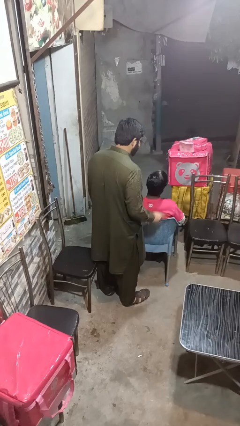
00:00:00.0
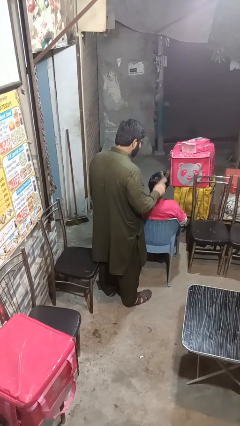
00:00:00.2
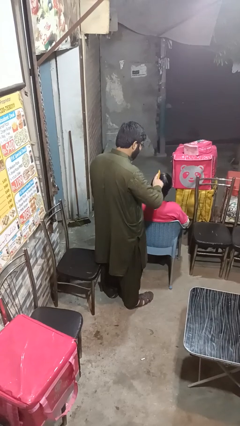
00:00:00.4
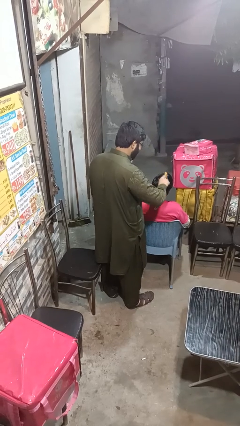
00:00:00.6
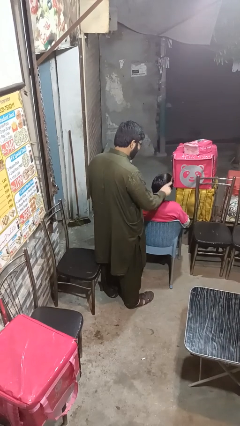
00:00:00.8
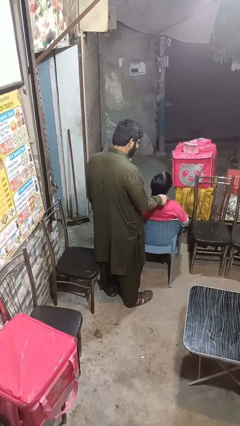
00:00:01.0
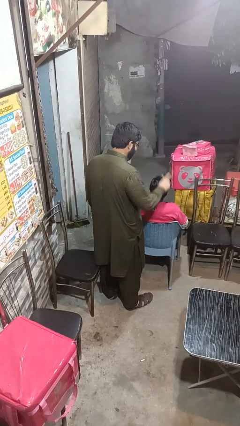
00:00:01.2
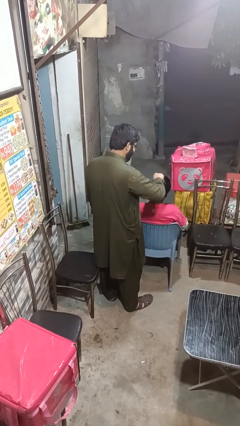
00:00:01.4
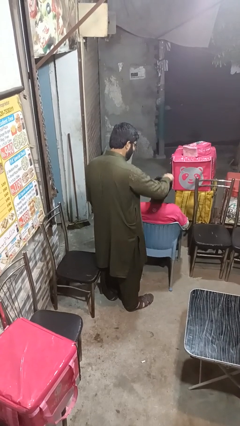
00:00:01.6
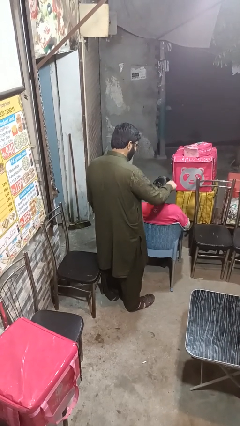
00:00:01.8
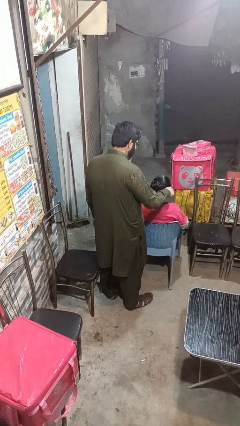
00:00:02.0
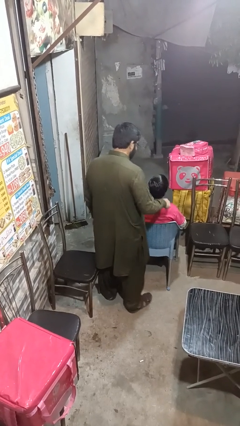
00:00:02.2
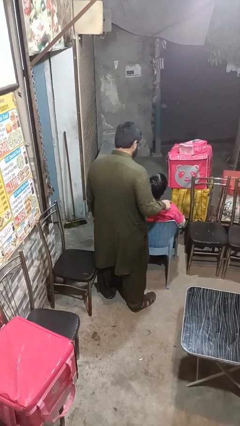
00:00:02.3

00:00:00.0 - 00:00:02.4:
person brushes hair of person

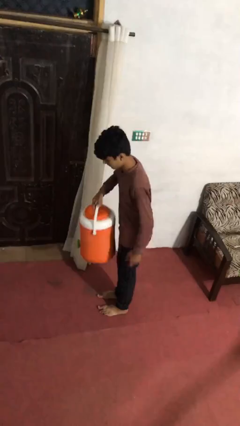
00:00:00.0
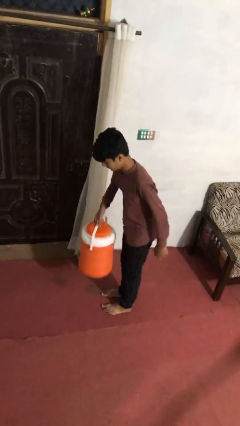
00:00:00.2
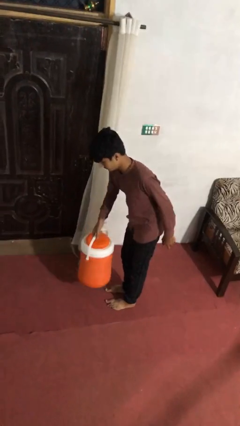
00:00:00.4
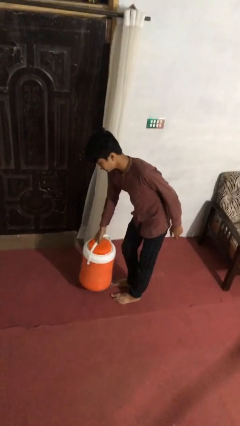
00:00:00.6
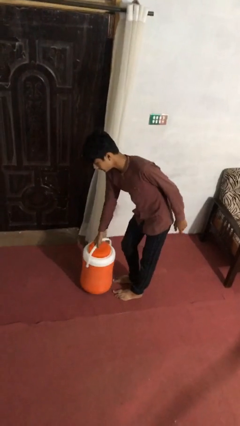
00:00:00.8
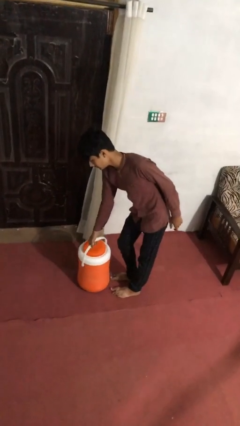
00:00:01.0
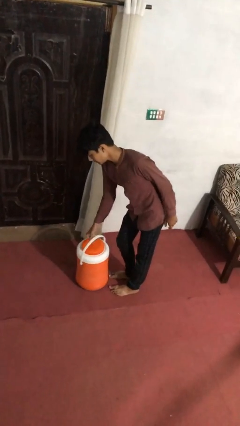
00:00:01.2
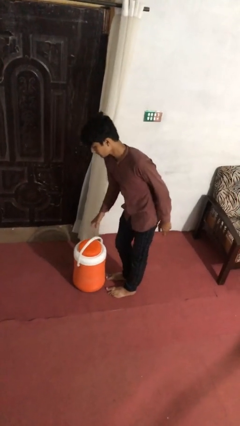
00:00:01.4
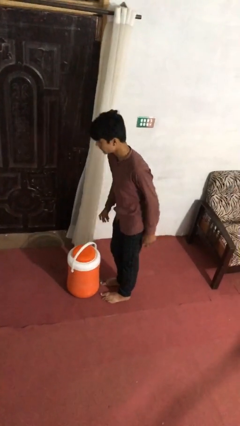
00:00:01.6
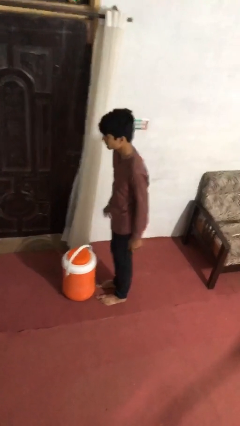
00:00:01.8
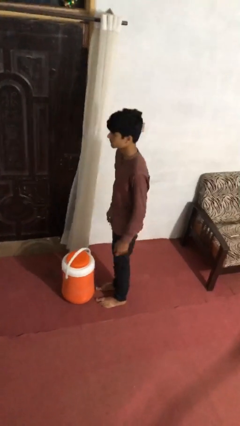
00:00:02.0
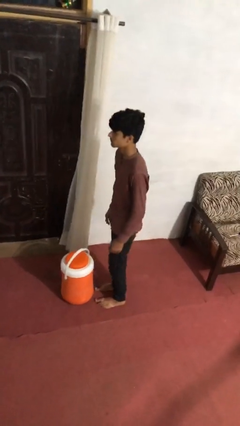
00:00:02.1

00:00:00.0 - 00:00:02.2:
person puts down object on floor

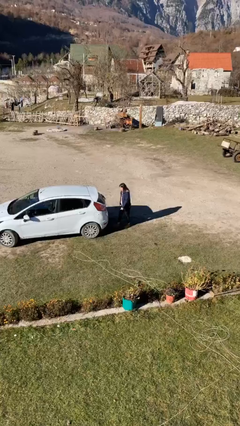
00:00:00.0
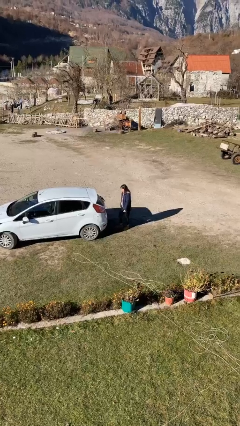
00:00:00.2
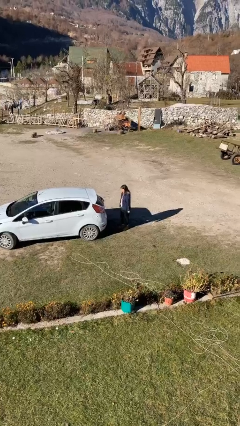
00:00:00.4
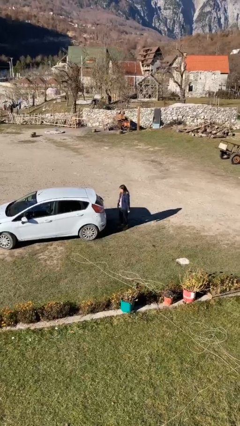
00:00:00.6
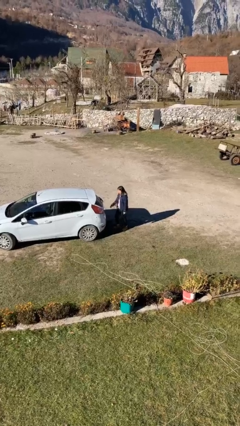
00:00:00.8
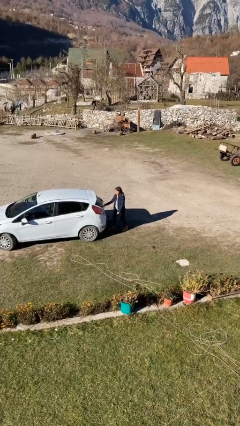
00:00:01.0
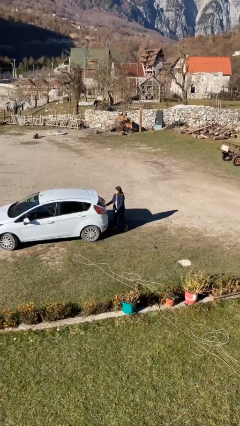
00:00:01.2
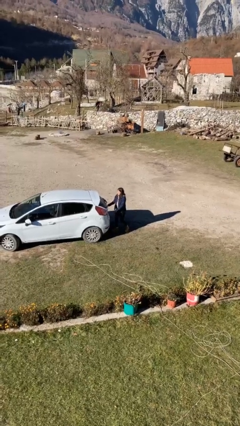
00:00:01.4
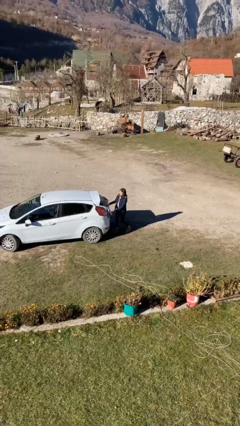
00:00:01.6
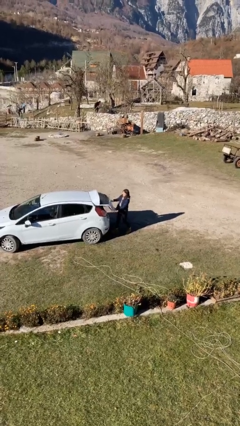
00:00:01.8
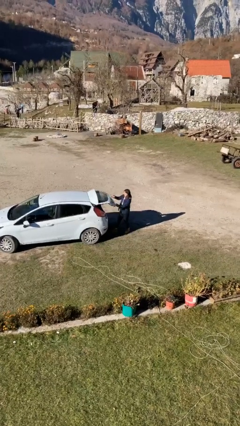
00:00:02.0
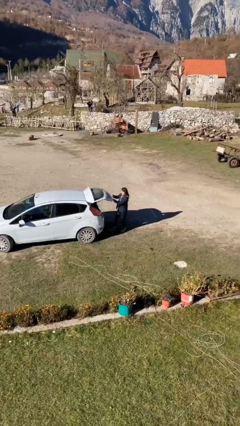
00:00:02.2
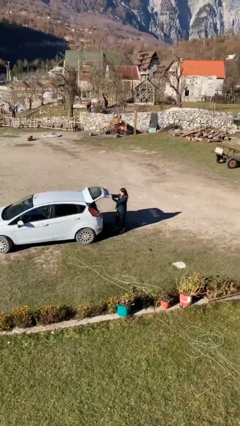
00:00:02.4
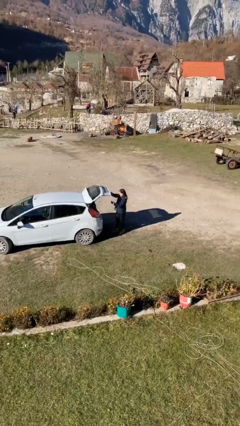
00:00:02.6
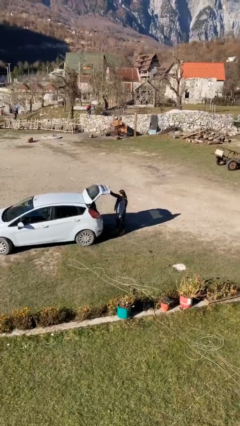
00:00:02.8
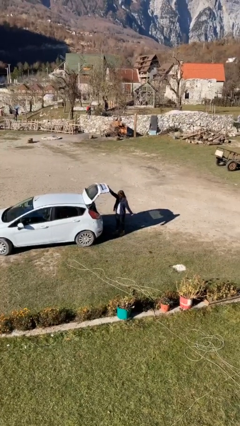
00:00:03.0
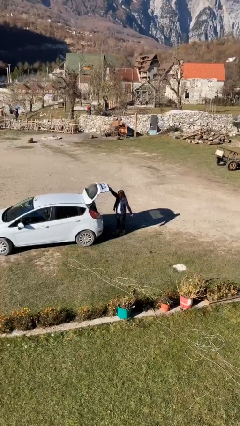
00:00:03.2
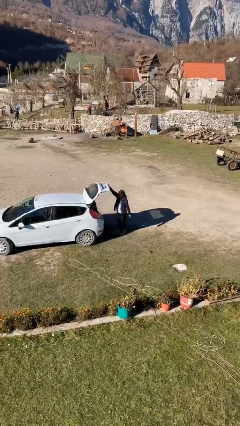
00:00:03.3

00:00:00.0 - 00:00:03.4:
person opens car trunk

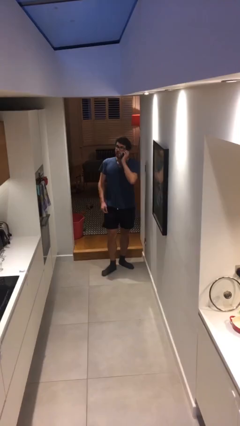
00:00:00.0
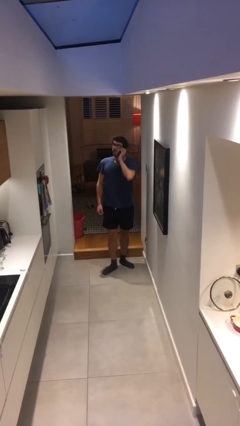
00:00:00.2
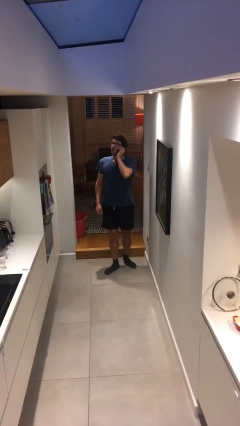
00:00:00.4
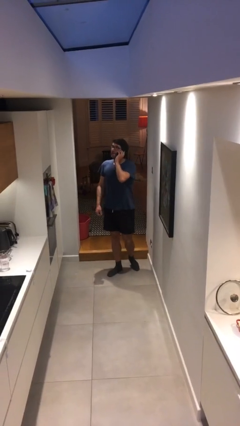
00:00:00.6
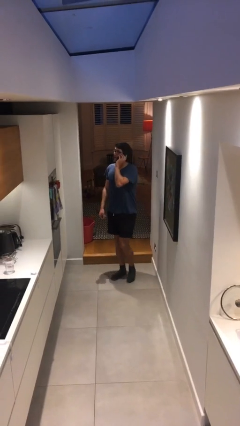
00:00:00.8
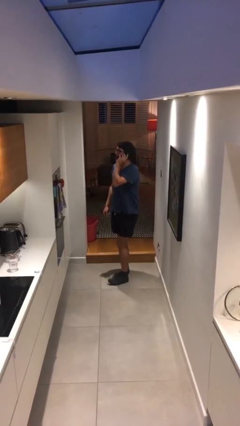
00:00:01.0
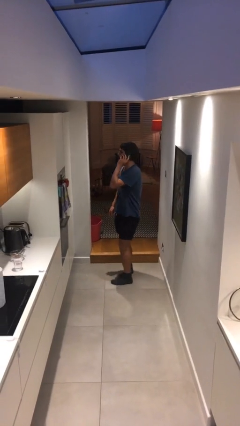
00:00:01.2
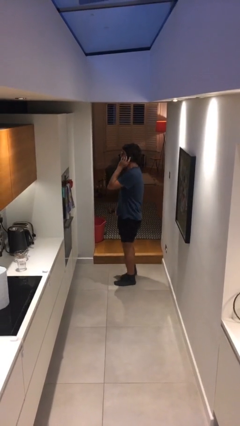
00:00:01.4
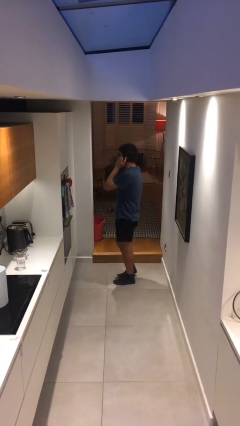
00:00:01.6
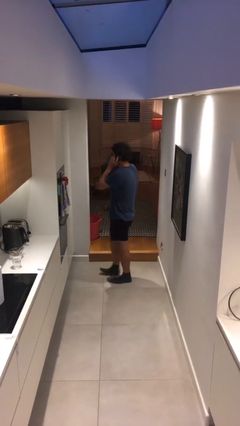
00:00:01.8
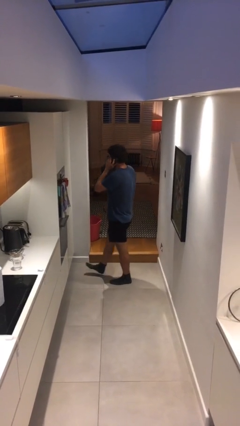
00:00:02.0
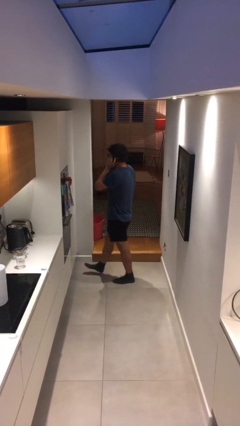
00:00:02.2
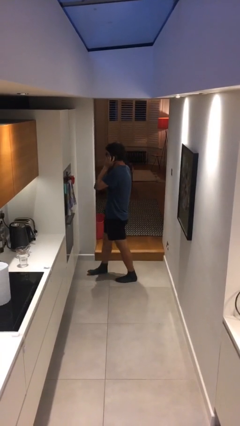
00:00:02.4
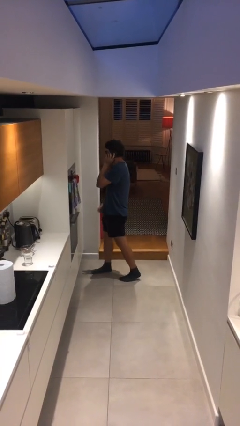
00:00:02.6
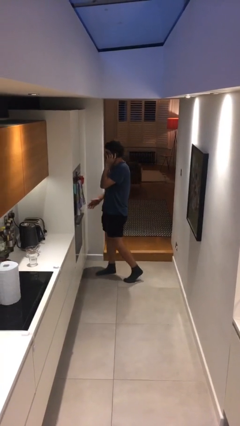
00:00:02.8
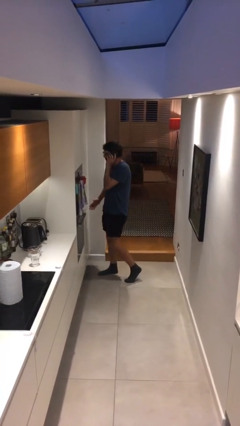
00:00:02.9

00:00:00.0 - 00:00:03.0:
person talks on phone

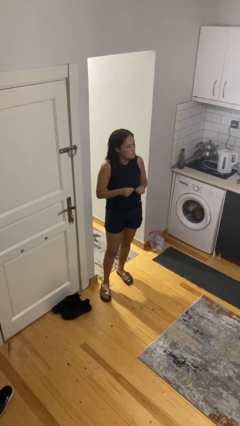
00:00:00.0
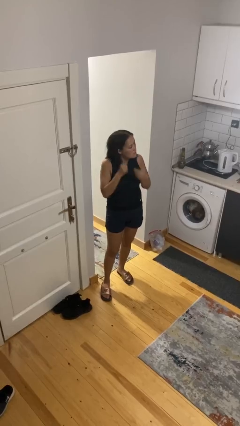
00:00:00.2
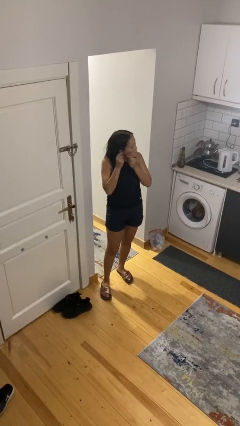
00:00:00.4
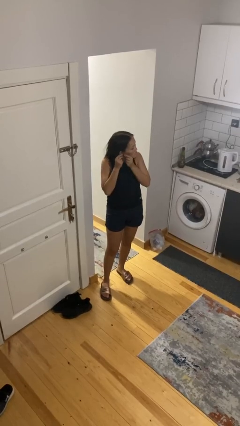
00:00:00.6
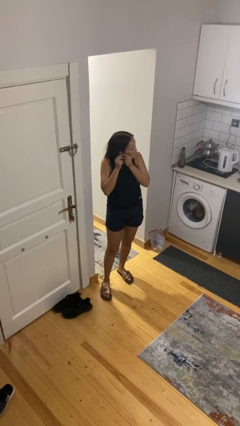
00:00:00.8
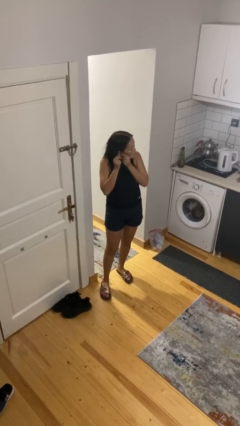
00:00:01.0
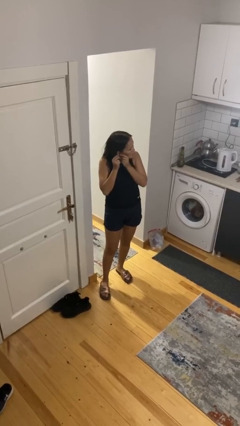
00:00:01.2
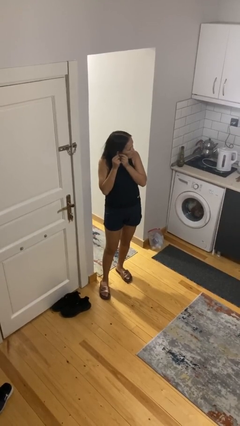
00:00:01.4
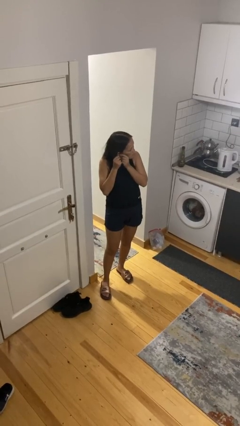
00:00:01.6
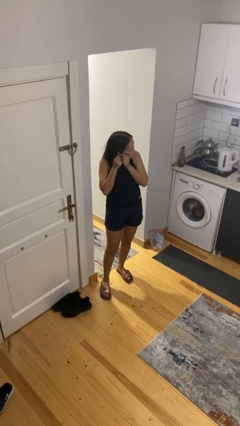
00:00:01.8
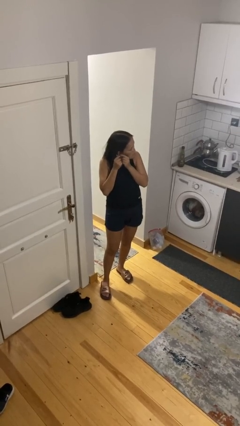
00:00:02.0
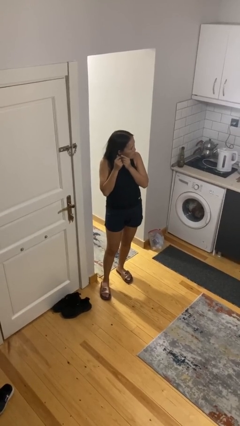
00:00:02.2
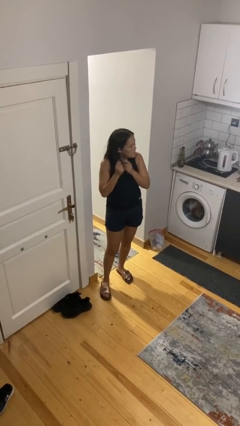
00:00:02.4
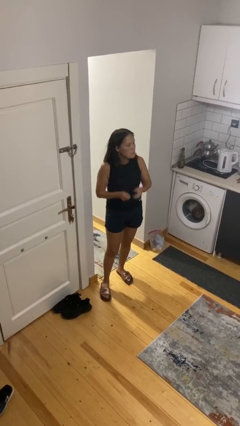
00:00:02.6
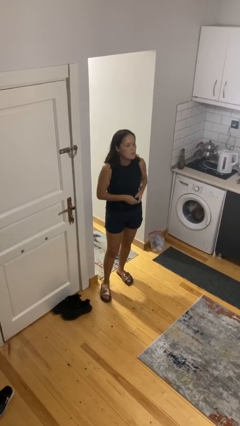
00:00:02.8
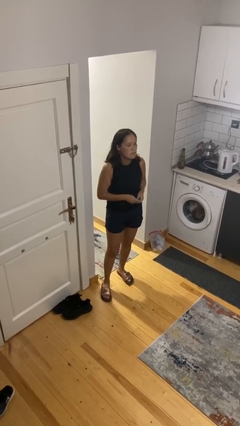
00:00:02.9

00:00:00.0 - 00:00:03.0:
person puts on earrings

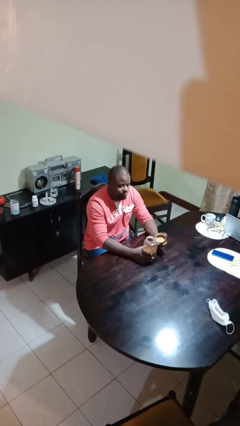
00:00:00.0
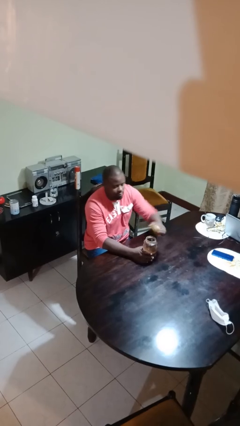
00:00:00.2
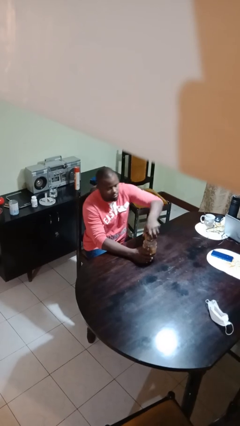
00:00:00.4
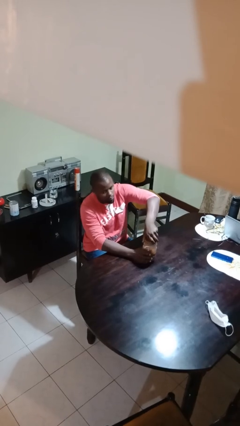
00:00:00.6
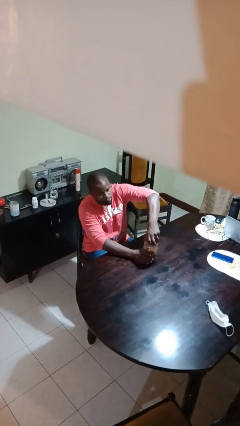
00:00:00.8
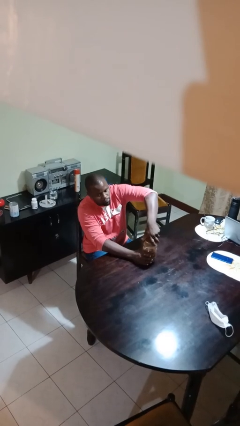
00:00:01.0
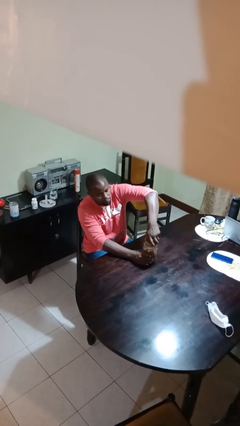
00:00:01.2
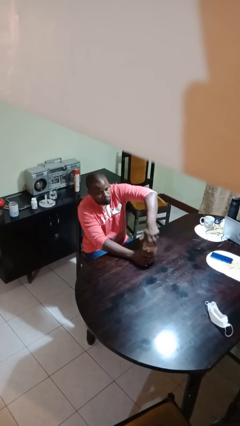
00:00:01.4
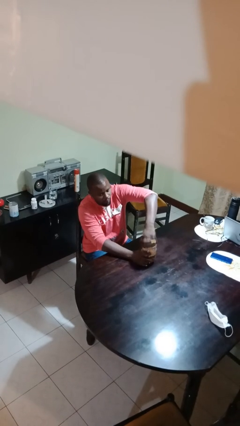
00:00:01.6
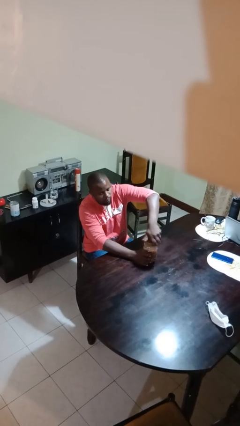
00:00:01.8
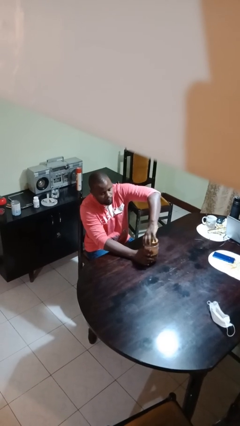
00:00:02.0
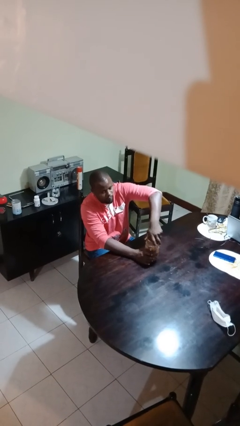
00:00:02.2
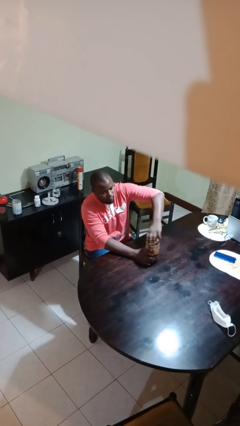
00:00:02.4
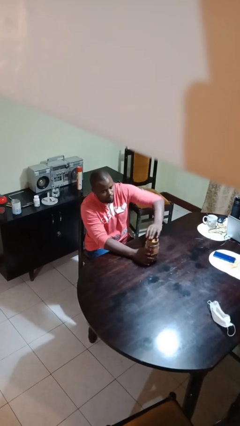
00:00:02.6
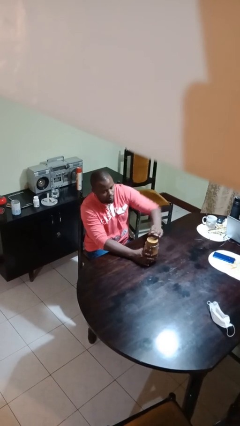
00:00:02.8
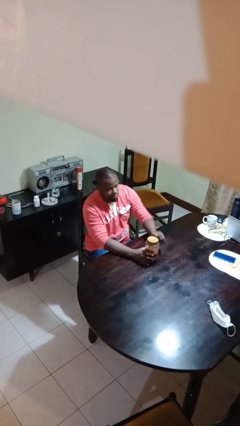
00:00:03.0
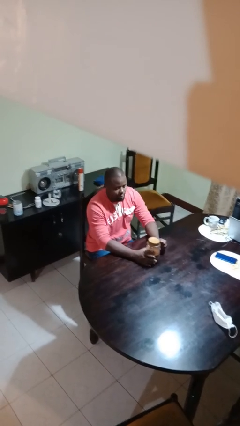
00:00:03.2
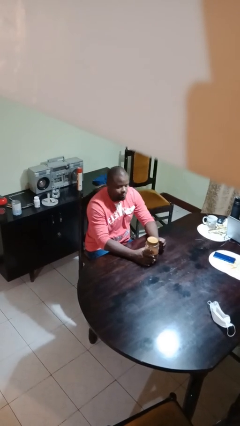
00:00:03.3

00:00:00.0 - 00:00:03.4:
person closes jar
